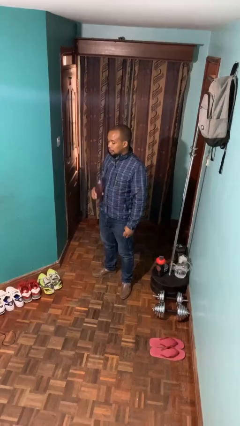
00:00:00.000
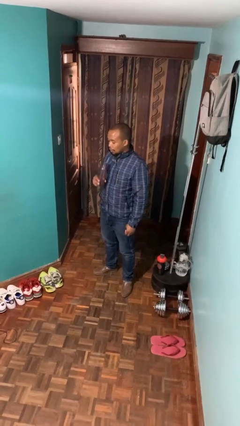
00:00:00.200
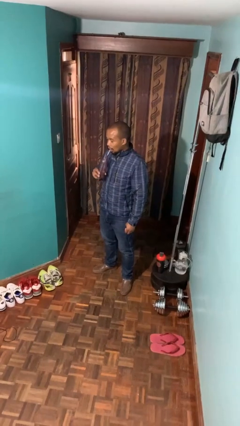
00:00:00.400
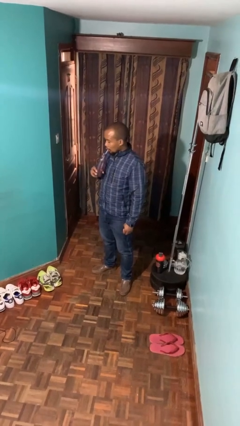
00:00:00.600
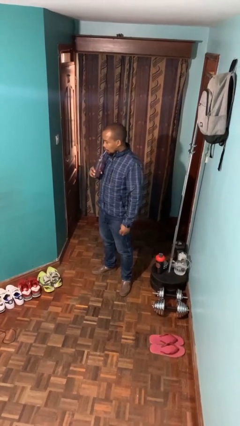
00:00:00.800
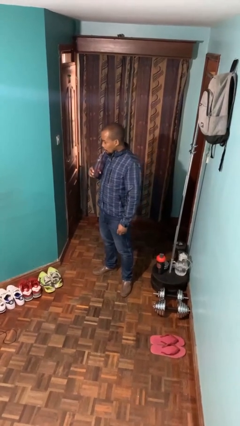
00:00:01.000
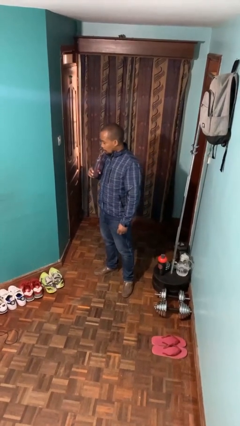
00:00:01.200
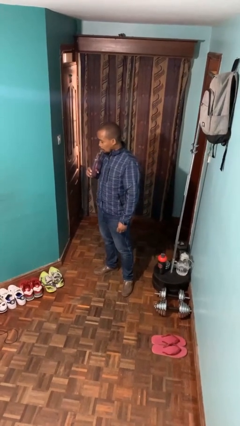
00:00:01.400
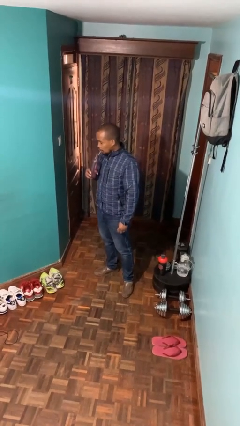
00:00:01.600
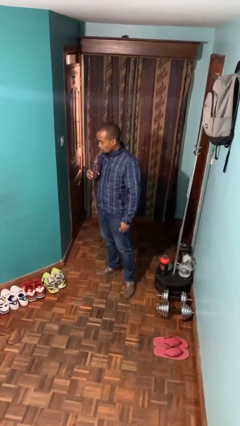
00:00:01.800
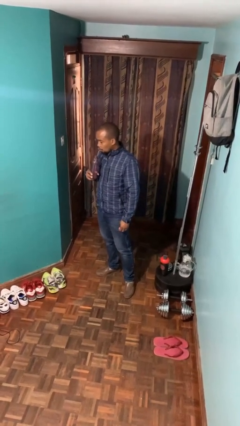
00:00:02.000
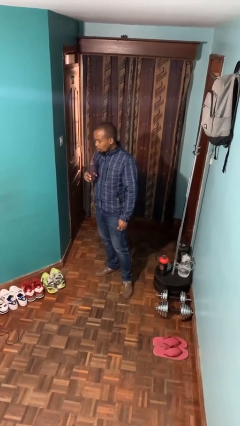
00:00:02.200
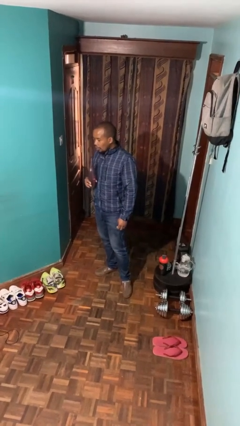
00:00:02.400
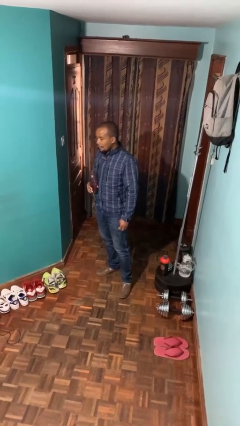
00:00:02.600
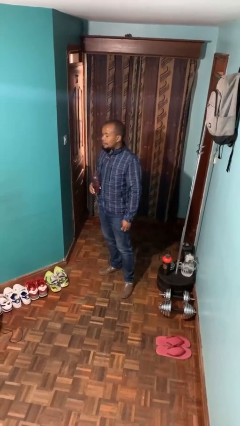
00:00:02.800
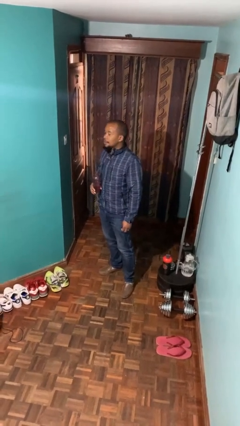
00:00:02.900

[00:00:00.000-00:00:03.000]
person drinks from straw

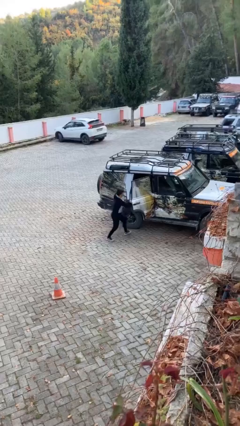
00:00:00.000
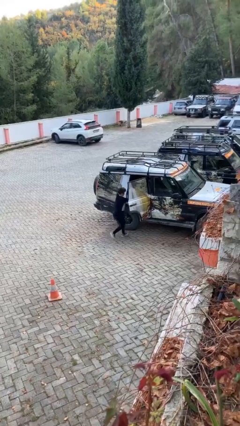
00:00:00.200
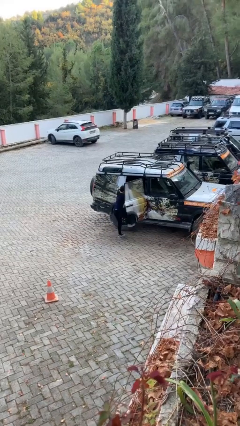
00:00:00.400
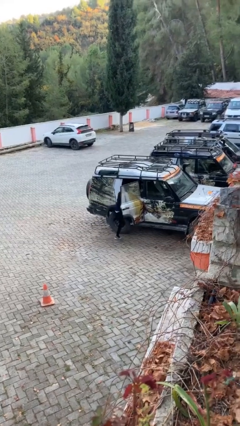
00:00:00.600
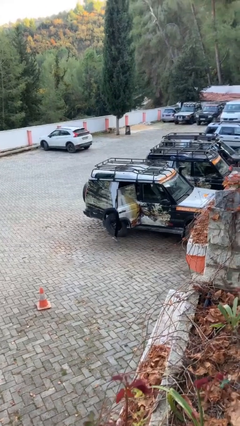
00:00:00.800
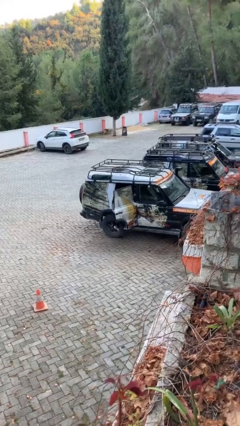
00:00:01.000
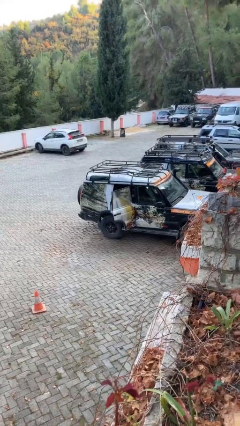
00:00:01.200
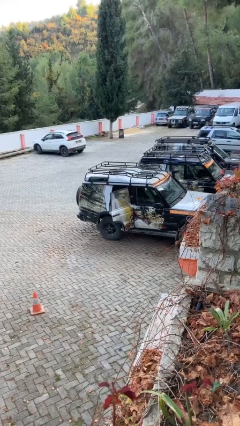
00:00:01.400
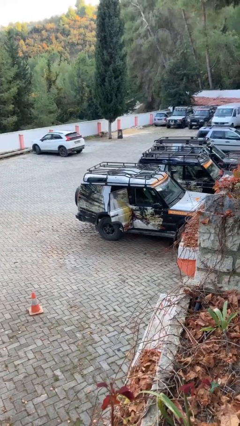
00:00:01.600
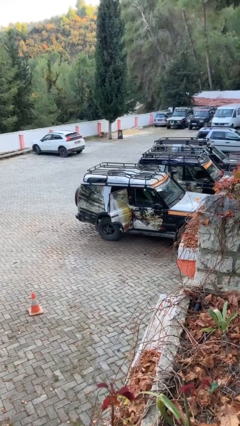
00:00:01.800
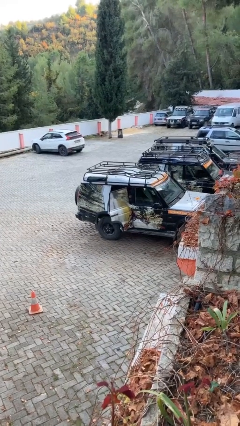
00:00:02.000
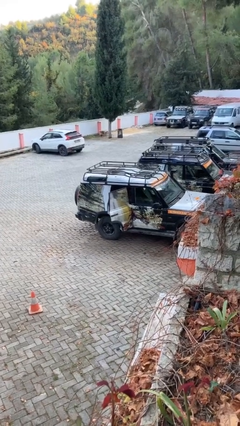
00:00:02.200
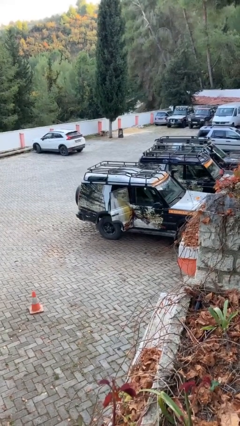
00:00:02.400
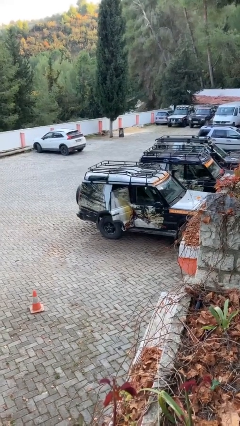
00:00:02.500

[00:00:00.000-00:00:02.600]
person enters car

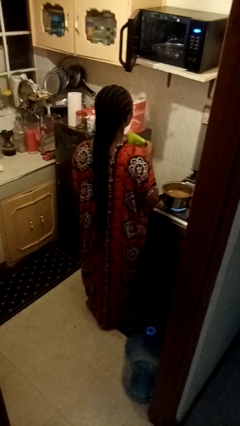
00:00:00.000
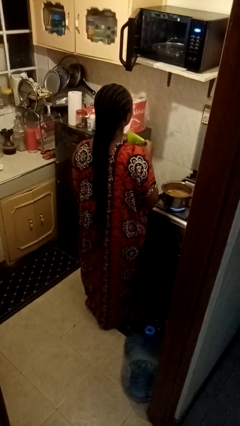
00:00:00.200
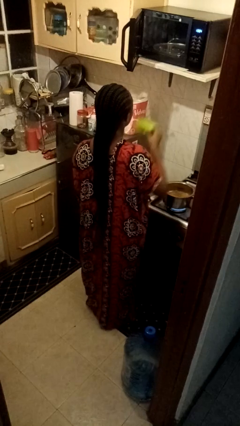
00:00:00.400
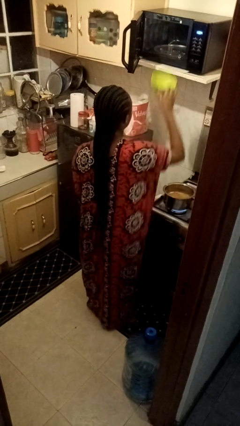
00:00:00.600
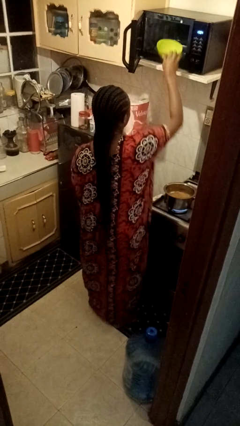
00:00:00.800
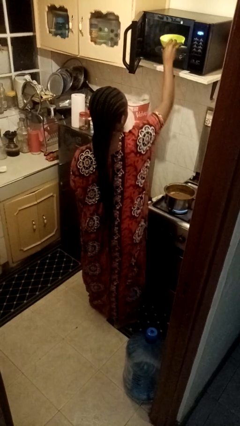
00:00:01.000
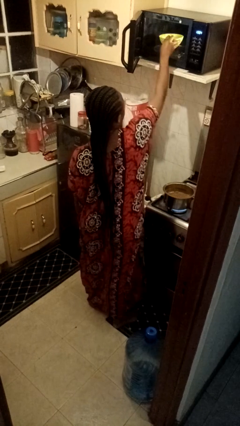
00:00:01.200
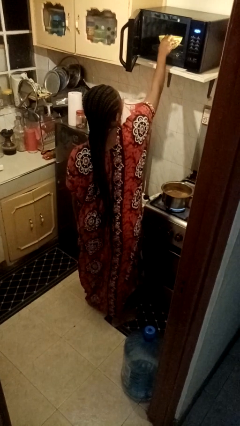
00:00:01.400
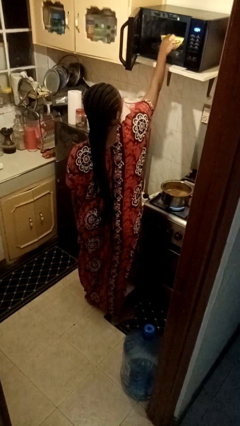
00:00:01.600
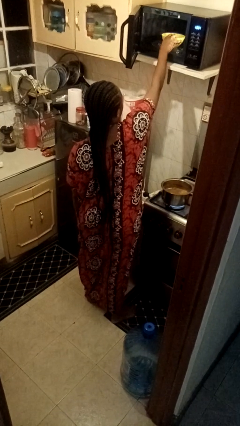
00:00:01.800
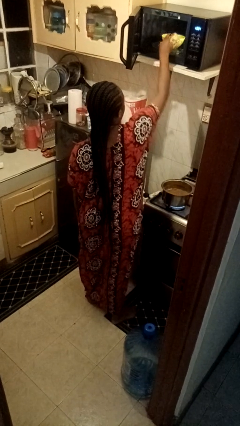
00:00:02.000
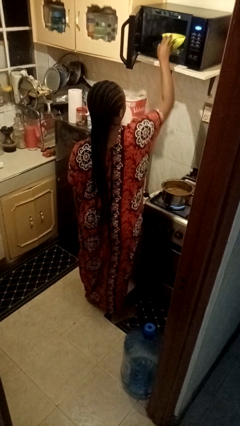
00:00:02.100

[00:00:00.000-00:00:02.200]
person puts object into microwave

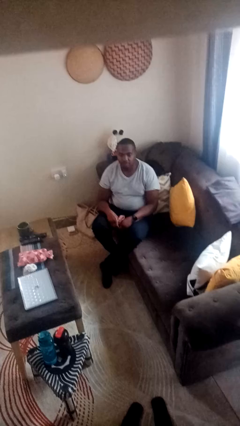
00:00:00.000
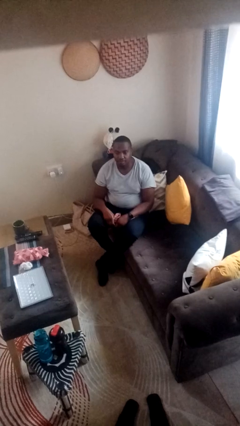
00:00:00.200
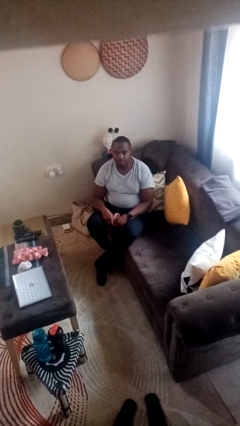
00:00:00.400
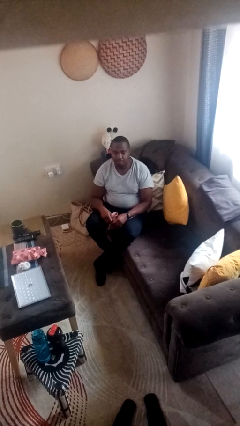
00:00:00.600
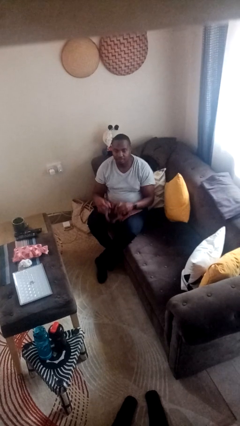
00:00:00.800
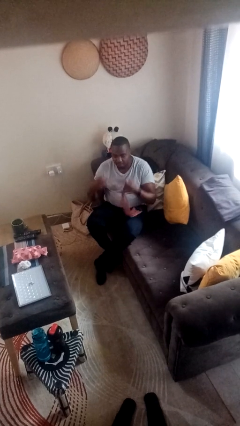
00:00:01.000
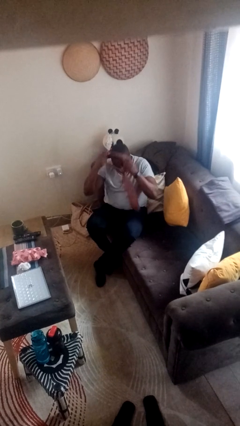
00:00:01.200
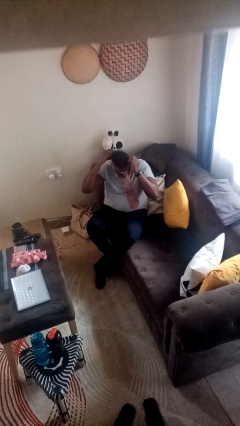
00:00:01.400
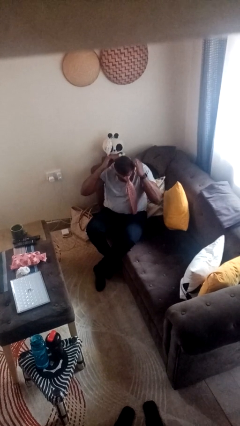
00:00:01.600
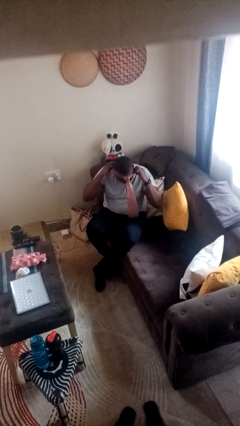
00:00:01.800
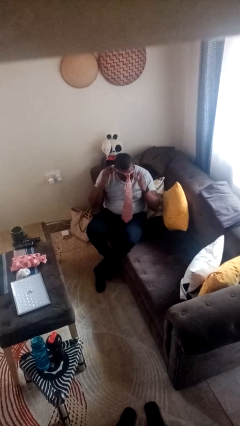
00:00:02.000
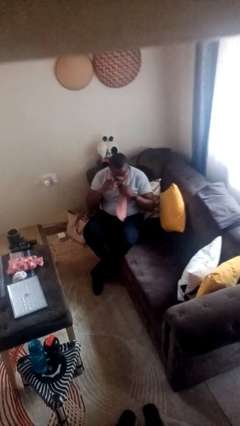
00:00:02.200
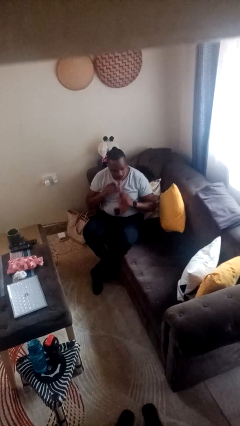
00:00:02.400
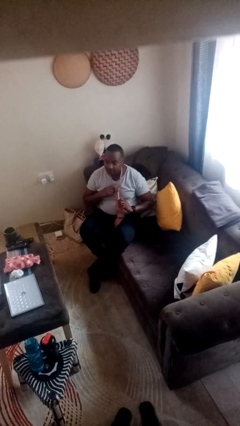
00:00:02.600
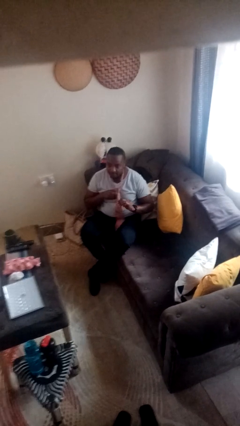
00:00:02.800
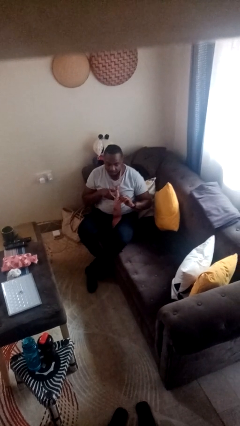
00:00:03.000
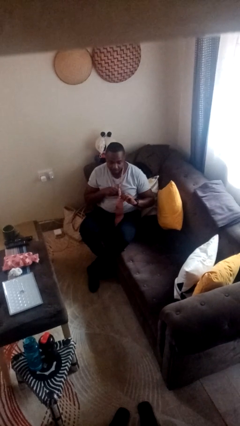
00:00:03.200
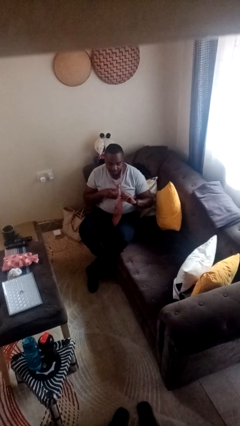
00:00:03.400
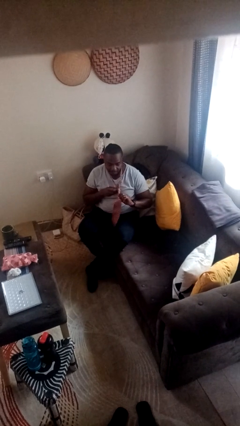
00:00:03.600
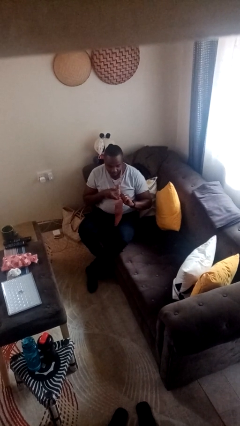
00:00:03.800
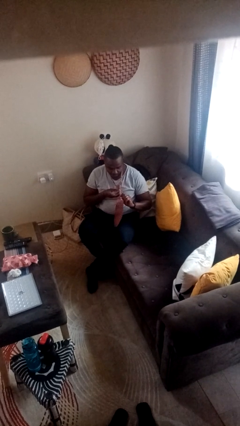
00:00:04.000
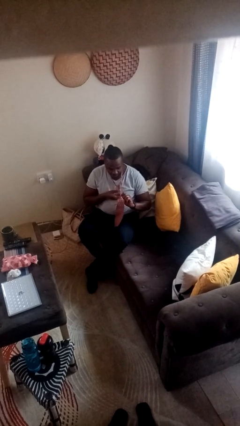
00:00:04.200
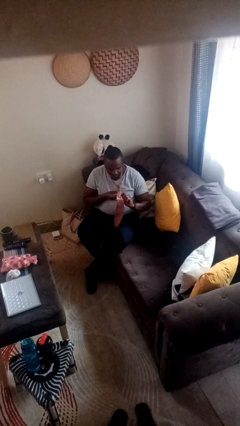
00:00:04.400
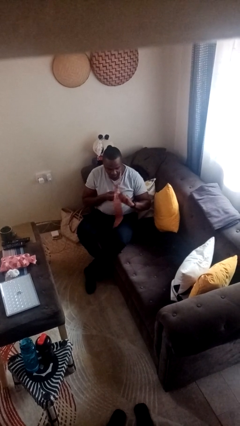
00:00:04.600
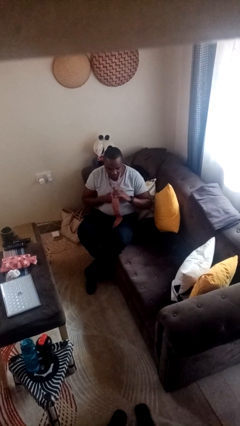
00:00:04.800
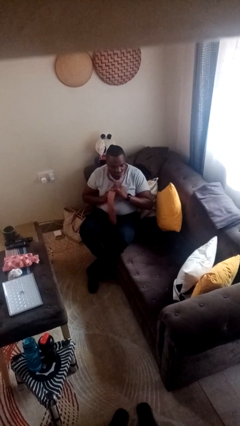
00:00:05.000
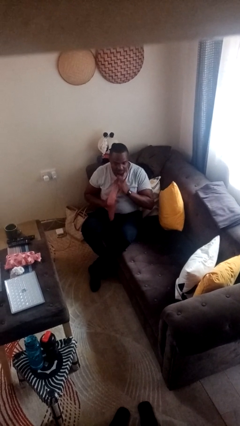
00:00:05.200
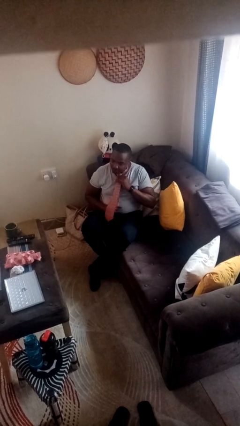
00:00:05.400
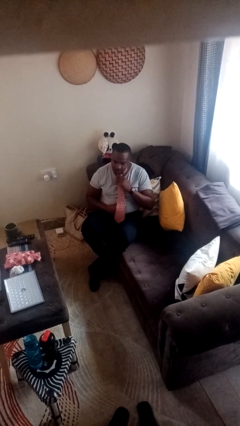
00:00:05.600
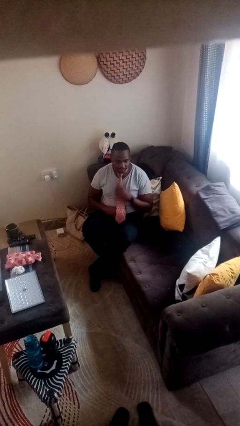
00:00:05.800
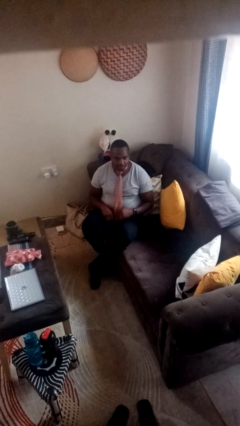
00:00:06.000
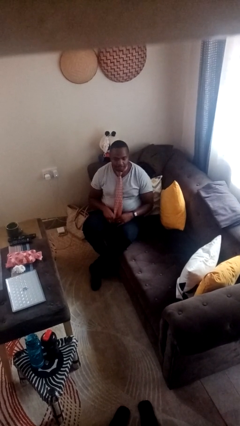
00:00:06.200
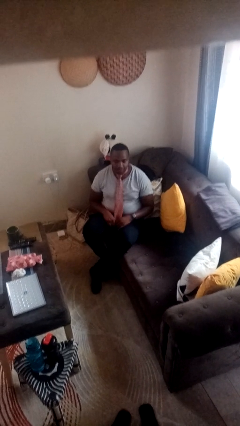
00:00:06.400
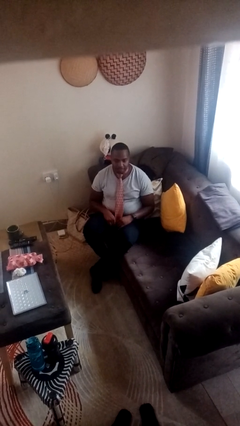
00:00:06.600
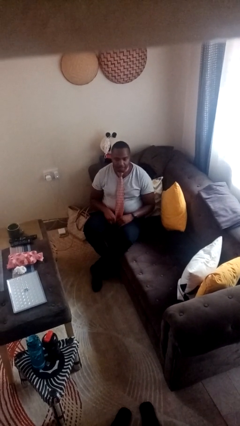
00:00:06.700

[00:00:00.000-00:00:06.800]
person puts on necktie

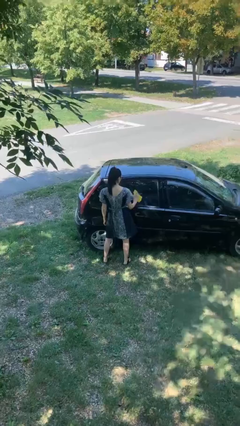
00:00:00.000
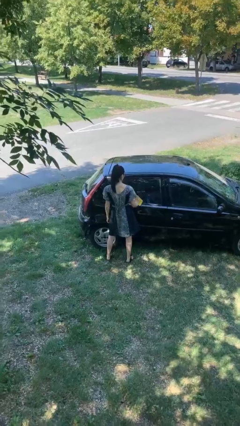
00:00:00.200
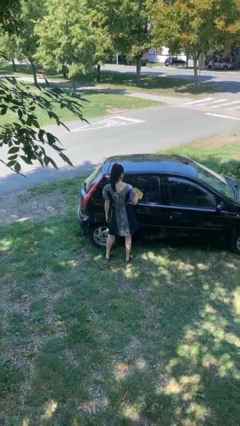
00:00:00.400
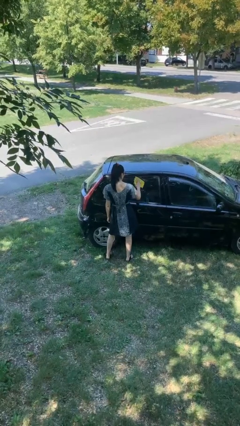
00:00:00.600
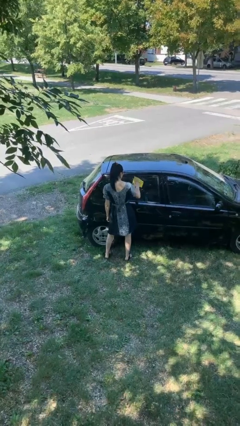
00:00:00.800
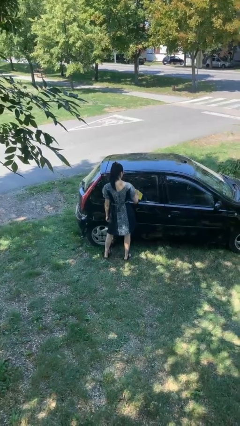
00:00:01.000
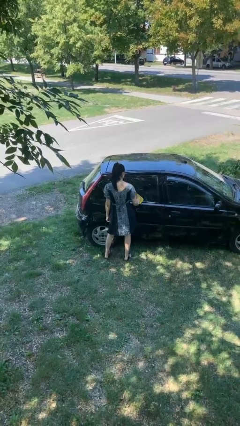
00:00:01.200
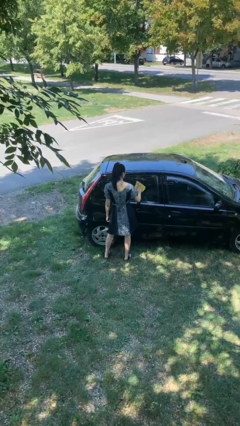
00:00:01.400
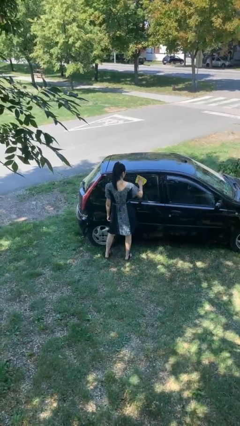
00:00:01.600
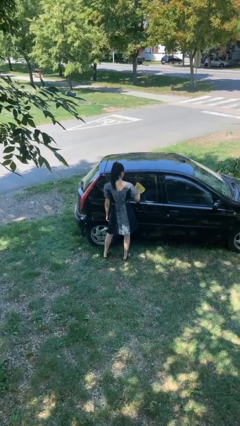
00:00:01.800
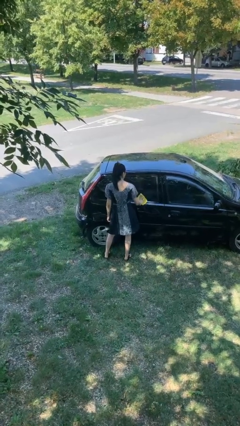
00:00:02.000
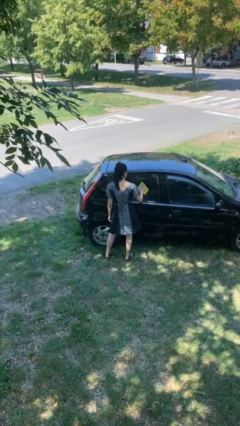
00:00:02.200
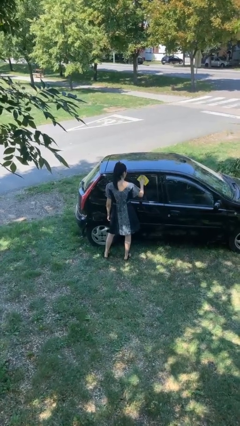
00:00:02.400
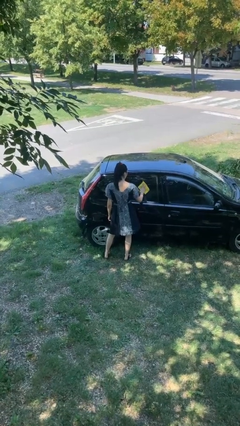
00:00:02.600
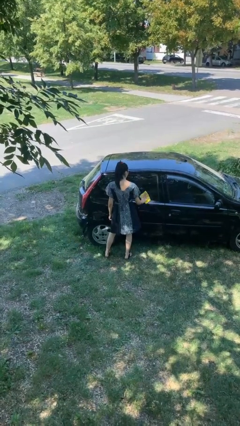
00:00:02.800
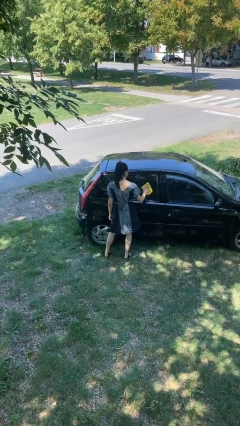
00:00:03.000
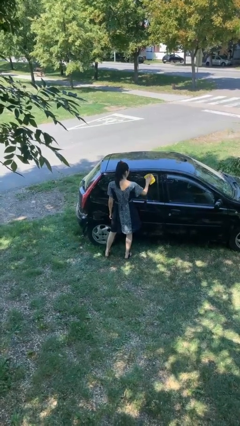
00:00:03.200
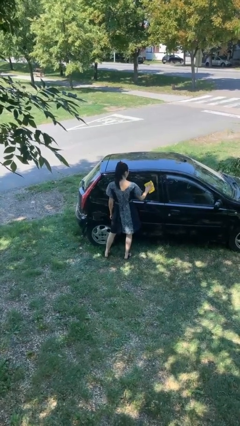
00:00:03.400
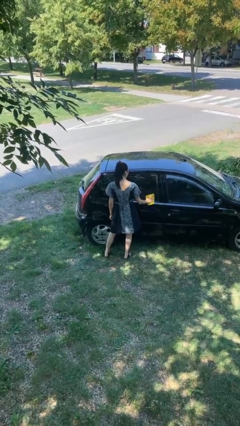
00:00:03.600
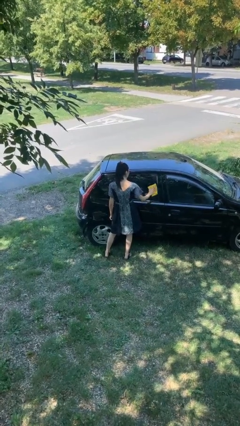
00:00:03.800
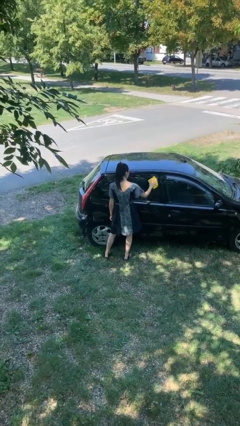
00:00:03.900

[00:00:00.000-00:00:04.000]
person polishes car with rag
